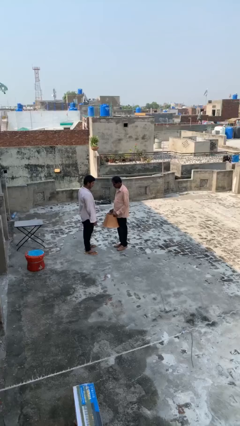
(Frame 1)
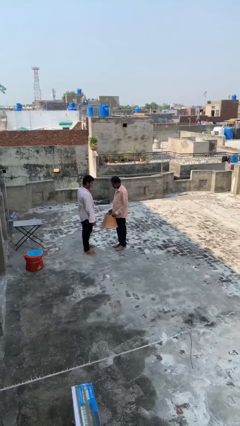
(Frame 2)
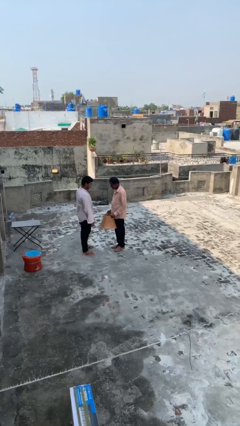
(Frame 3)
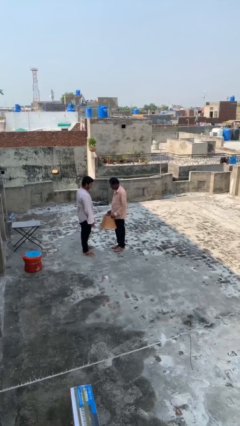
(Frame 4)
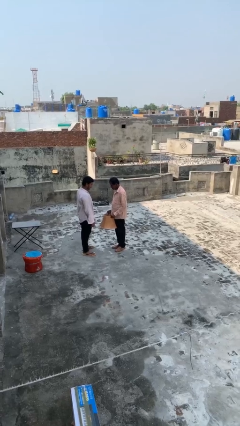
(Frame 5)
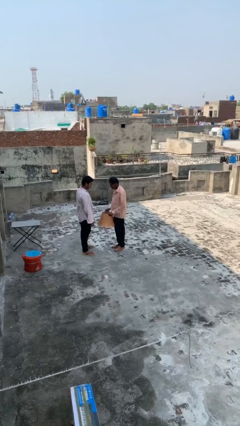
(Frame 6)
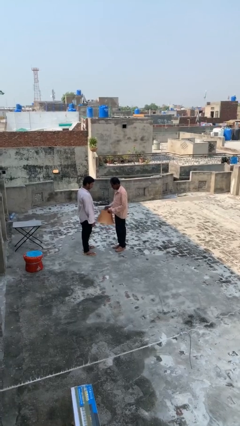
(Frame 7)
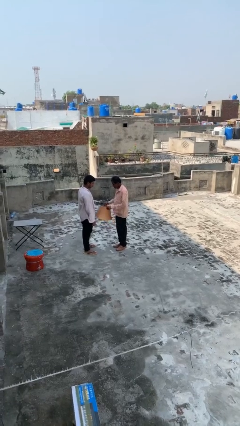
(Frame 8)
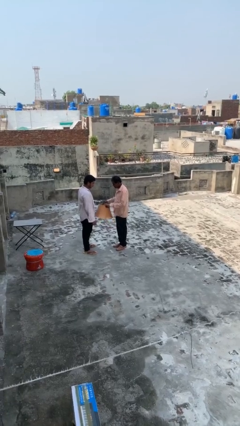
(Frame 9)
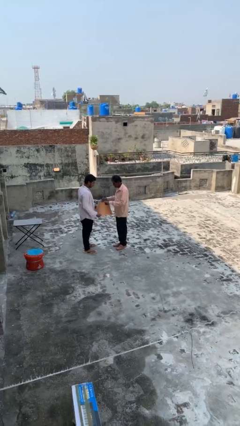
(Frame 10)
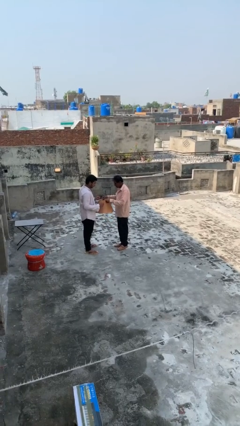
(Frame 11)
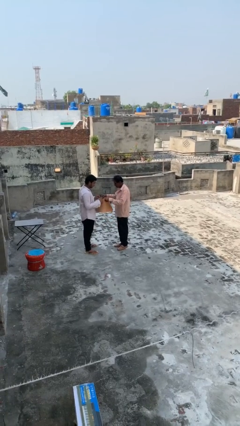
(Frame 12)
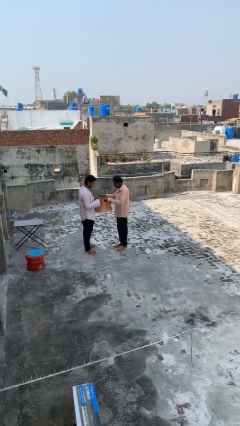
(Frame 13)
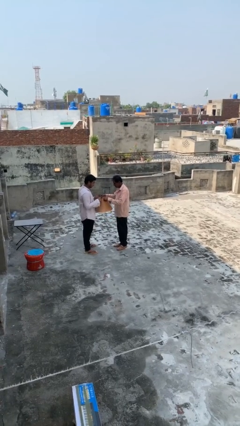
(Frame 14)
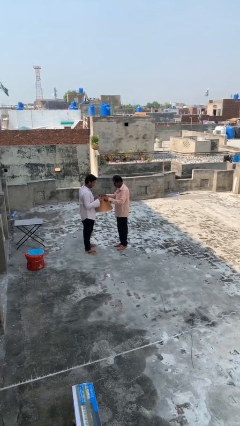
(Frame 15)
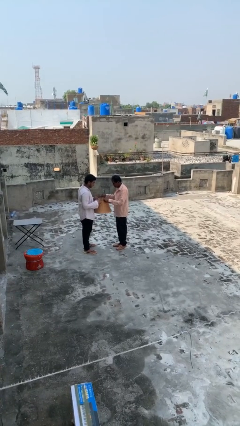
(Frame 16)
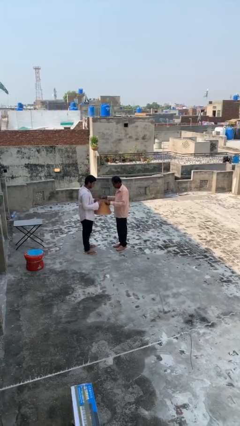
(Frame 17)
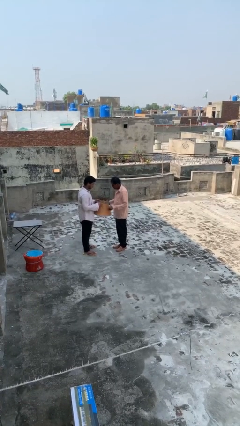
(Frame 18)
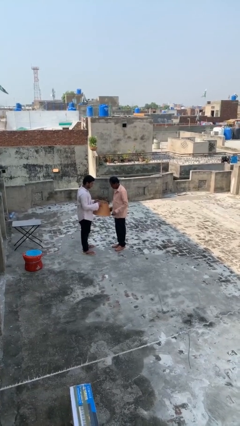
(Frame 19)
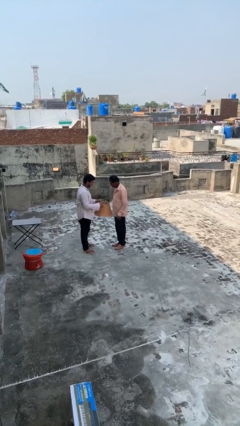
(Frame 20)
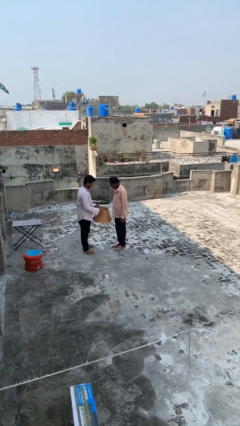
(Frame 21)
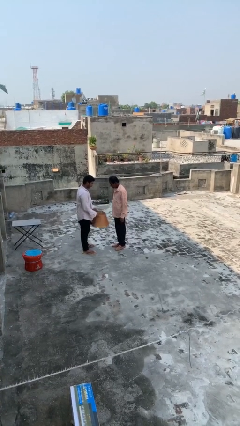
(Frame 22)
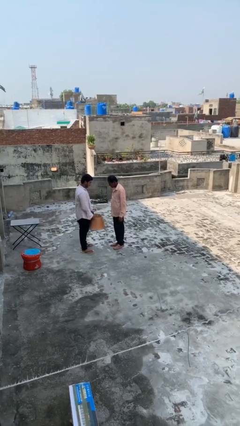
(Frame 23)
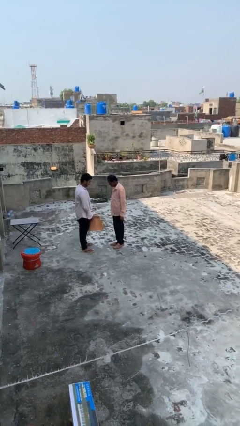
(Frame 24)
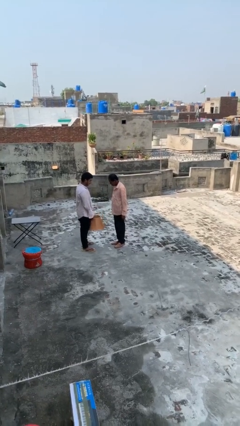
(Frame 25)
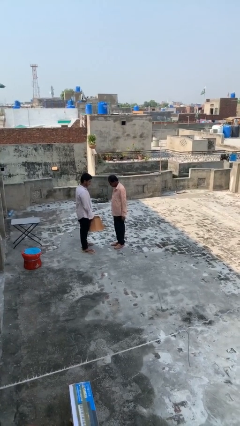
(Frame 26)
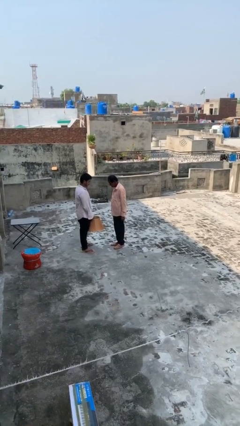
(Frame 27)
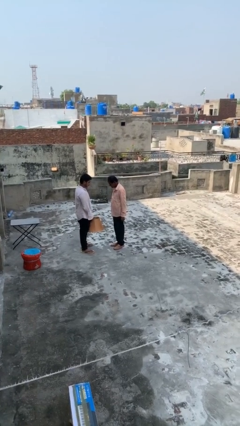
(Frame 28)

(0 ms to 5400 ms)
person transfers object to person

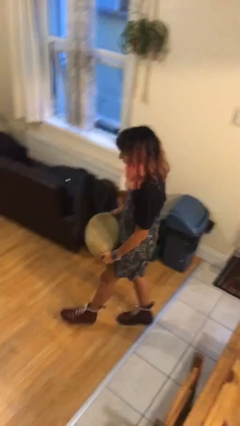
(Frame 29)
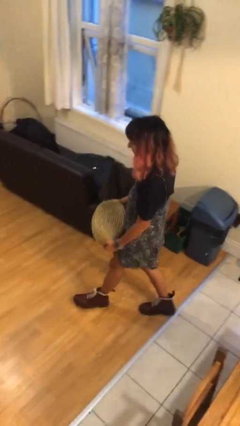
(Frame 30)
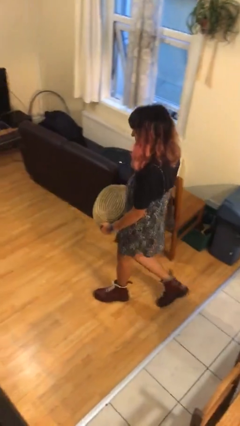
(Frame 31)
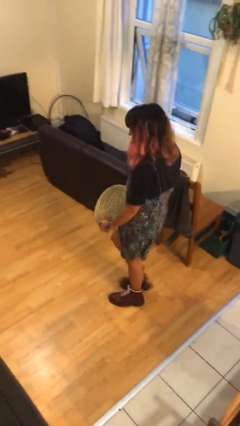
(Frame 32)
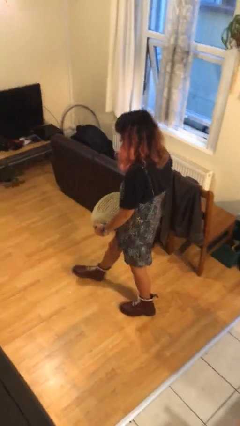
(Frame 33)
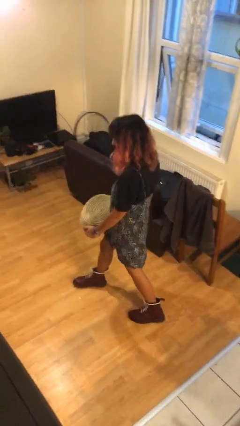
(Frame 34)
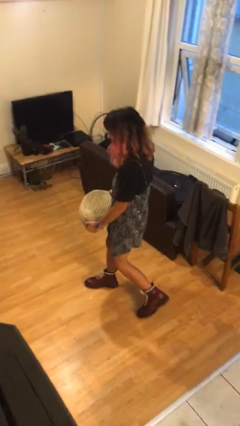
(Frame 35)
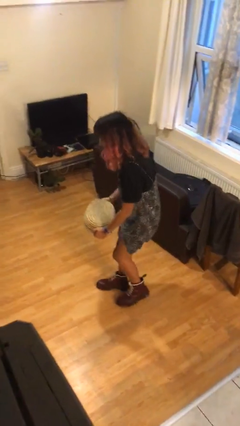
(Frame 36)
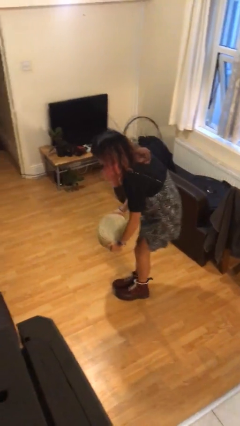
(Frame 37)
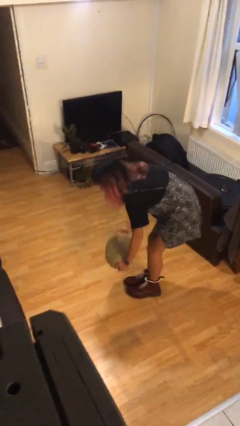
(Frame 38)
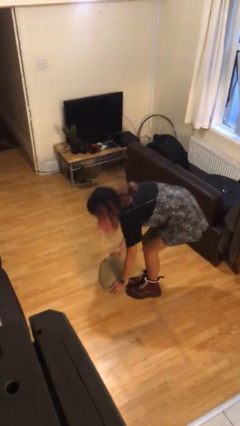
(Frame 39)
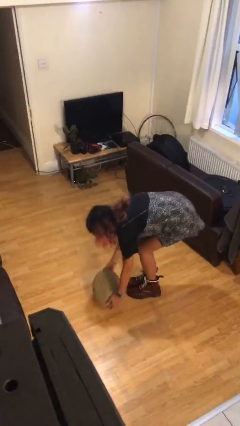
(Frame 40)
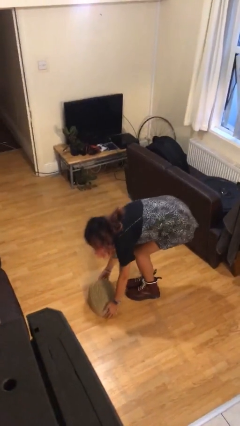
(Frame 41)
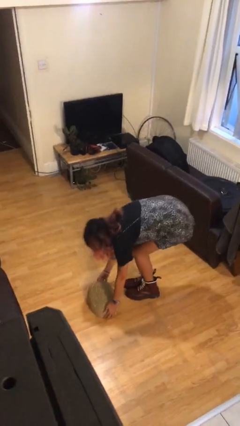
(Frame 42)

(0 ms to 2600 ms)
person puts down object on floor

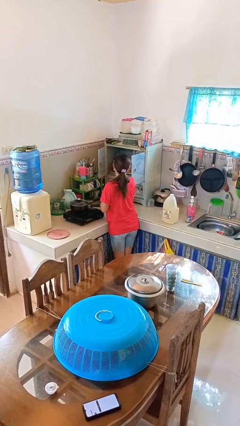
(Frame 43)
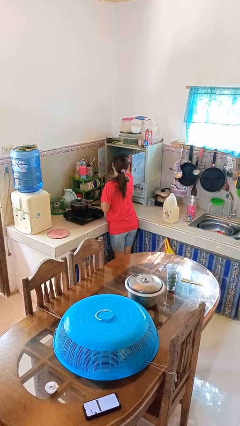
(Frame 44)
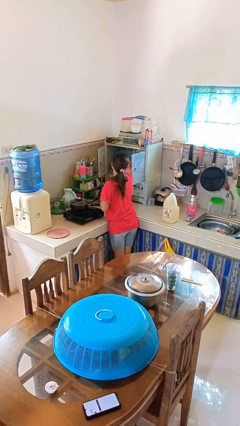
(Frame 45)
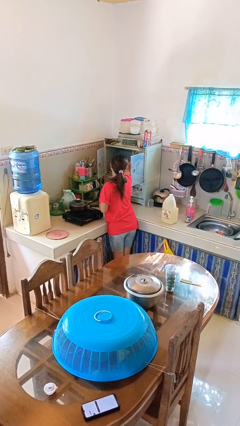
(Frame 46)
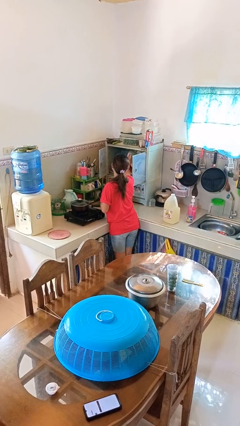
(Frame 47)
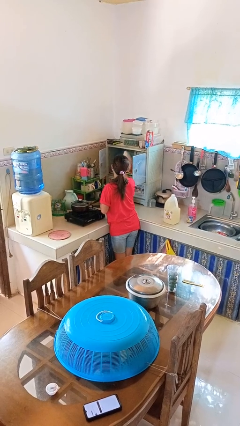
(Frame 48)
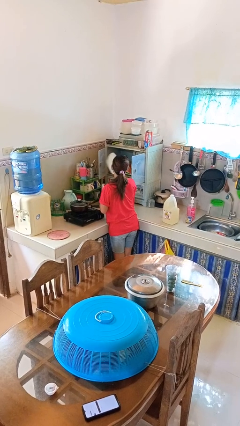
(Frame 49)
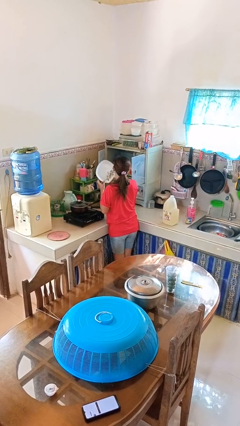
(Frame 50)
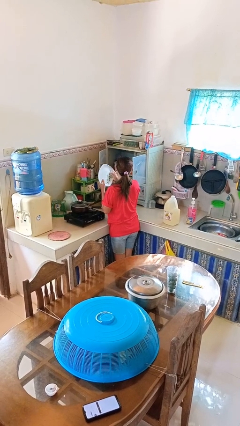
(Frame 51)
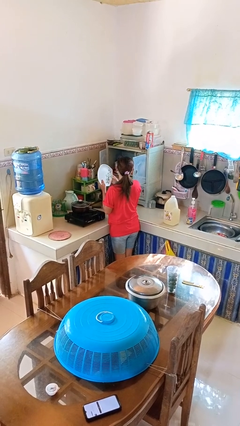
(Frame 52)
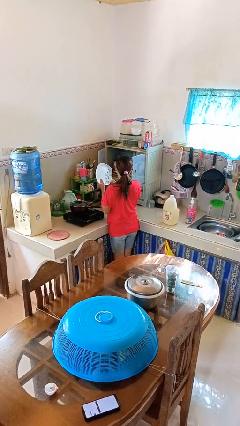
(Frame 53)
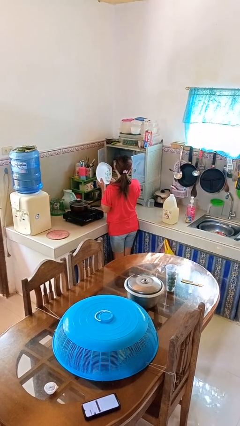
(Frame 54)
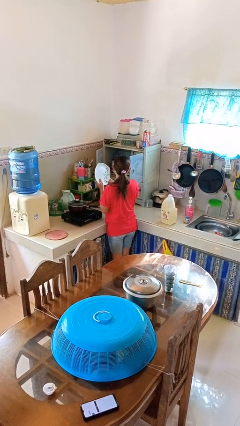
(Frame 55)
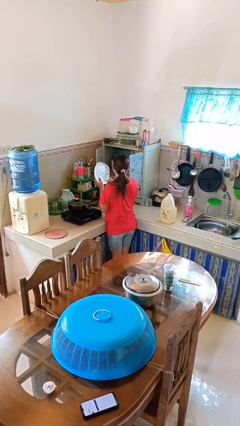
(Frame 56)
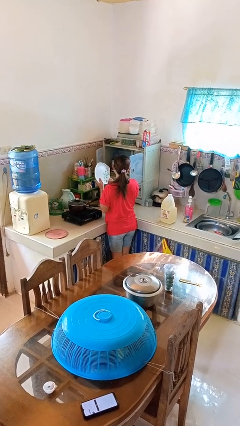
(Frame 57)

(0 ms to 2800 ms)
person takes object from cabinet

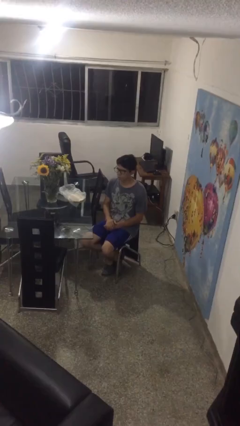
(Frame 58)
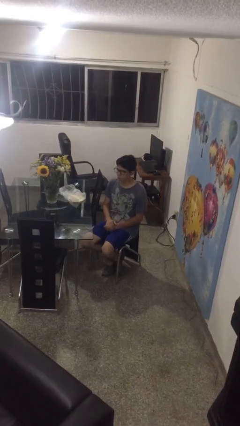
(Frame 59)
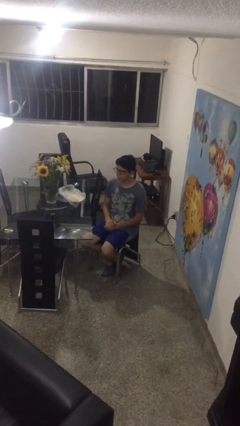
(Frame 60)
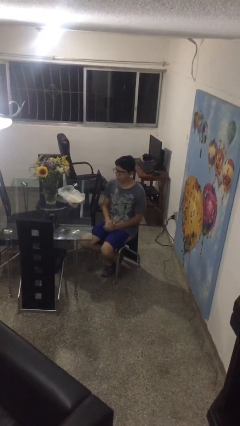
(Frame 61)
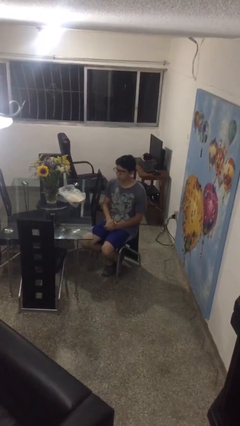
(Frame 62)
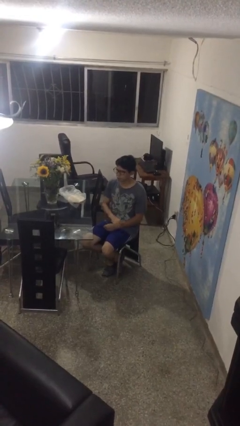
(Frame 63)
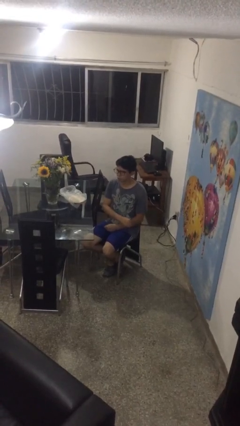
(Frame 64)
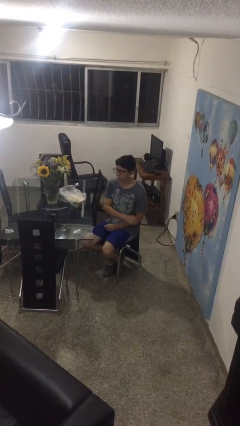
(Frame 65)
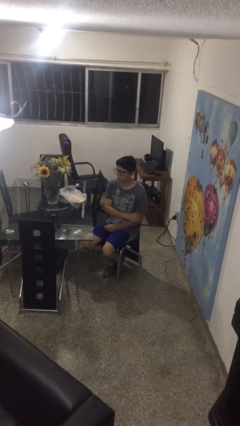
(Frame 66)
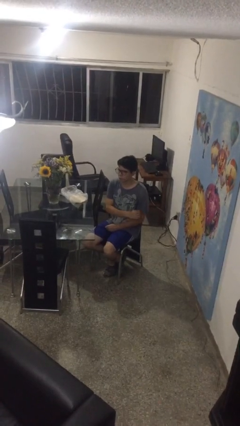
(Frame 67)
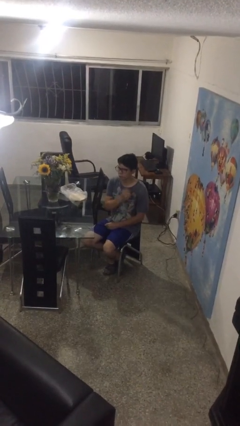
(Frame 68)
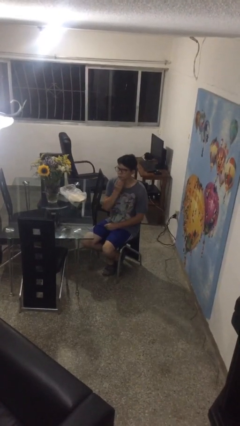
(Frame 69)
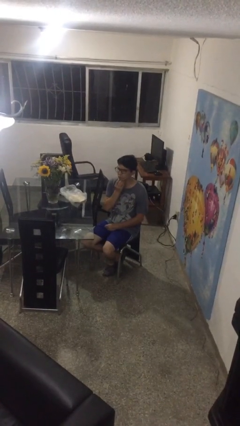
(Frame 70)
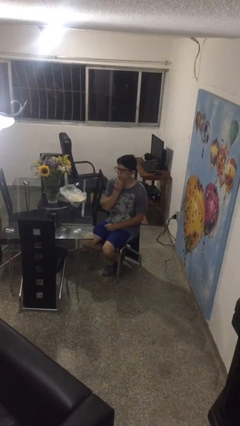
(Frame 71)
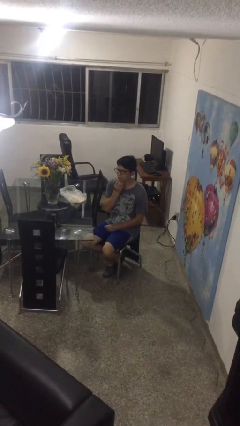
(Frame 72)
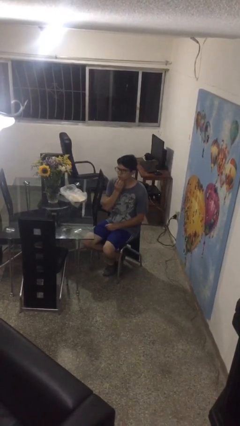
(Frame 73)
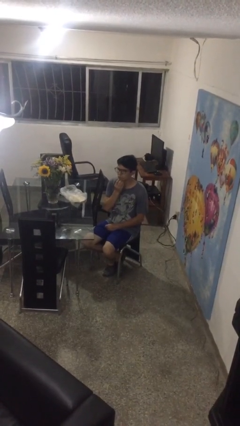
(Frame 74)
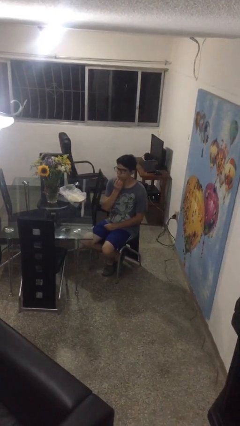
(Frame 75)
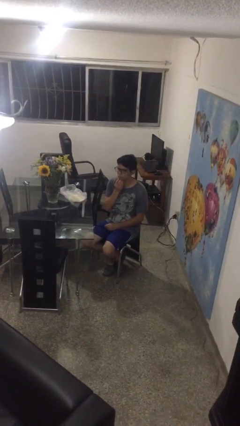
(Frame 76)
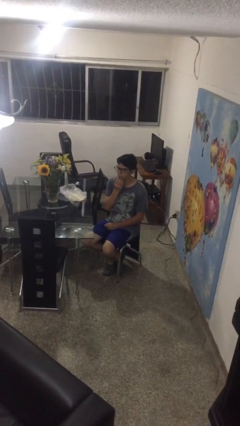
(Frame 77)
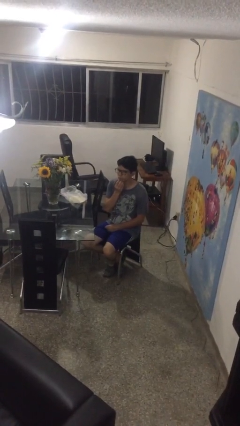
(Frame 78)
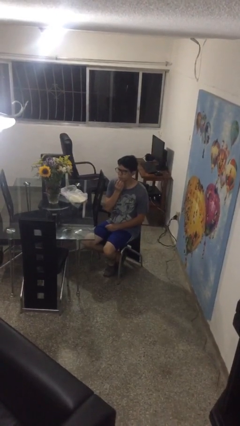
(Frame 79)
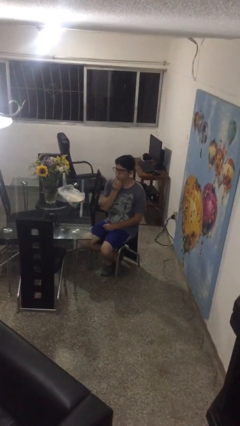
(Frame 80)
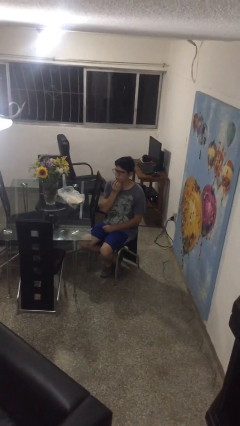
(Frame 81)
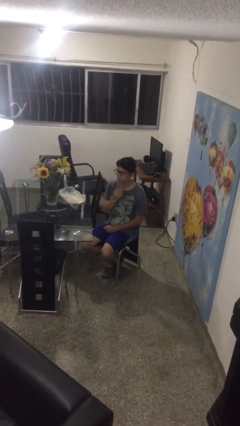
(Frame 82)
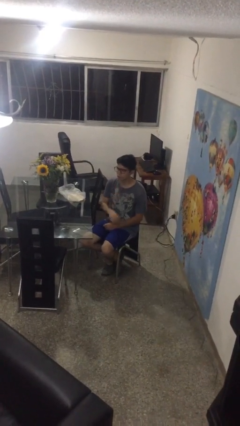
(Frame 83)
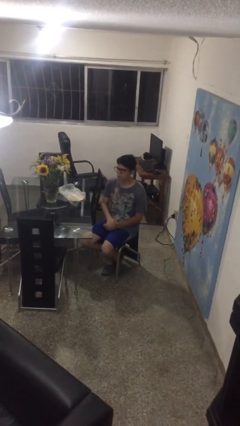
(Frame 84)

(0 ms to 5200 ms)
person strokes chin

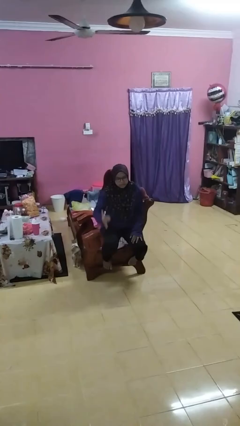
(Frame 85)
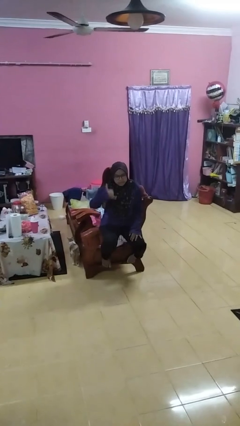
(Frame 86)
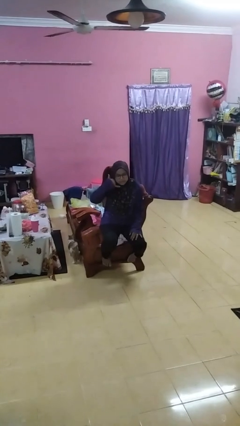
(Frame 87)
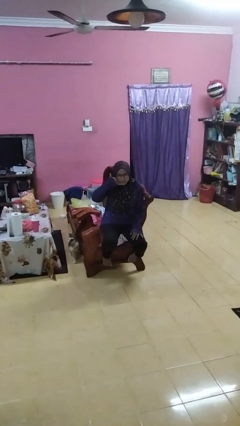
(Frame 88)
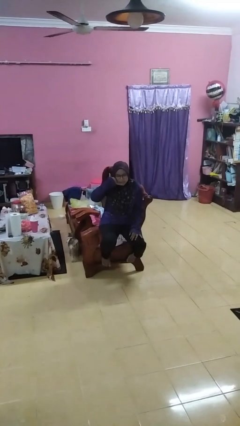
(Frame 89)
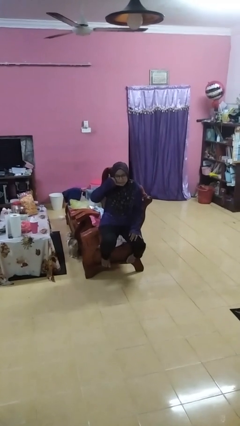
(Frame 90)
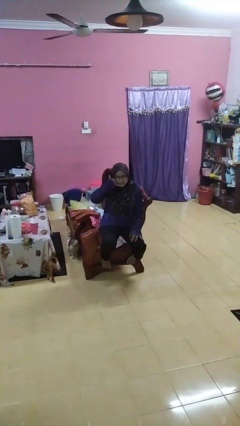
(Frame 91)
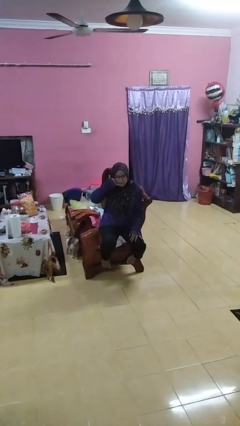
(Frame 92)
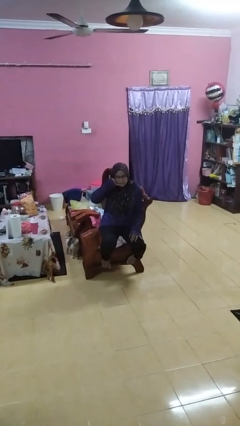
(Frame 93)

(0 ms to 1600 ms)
person gestures call me
